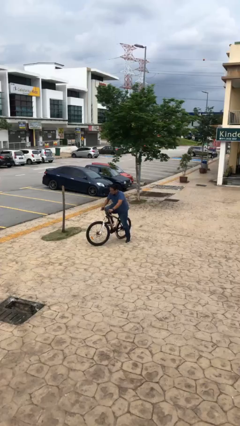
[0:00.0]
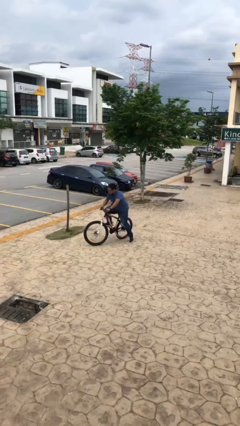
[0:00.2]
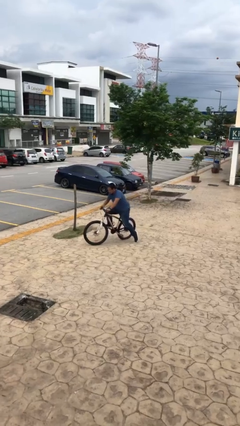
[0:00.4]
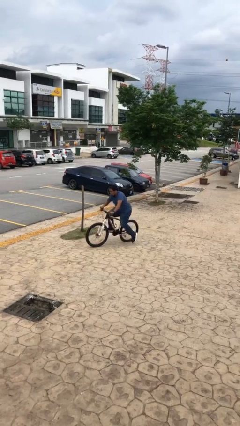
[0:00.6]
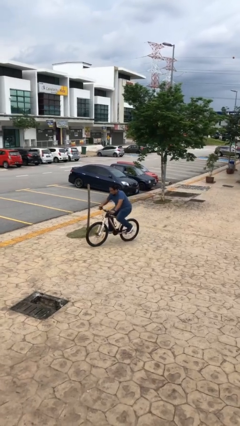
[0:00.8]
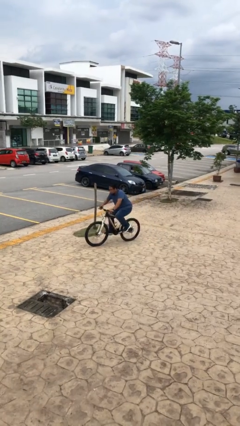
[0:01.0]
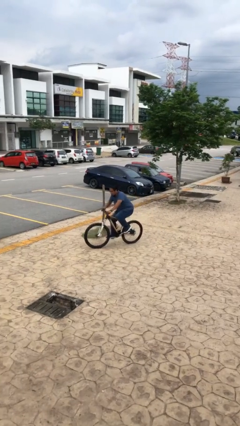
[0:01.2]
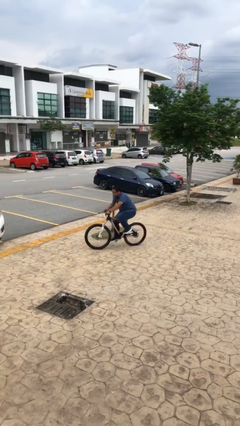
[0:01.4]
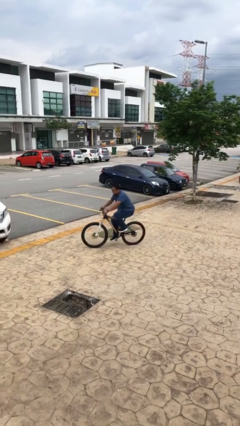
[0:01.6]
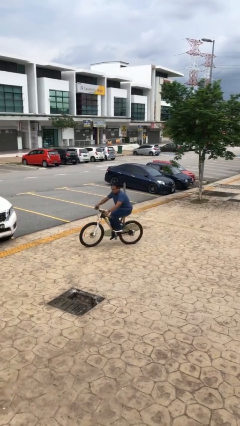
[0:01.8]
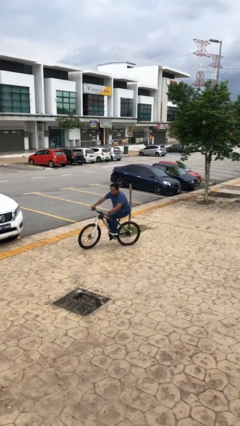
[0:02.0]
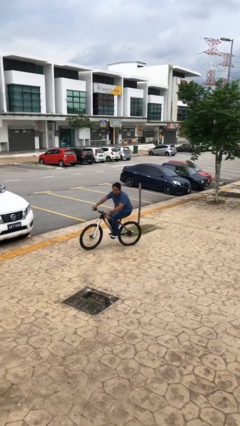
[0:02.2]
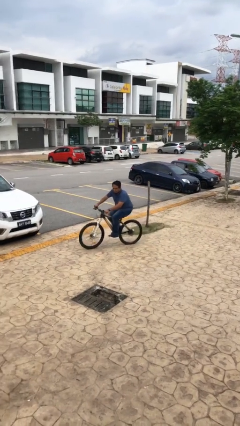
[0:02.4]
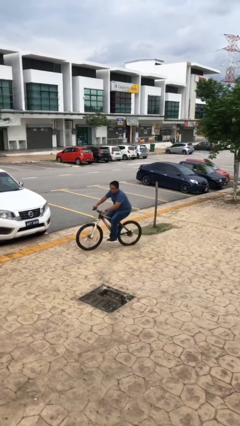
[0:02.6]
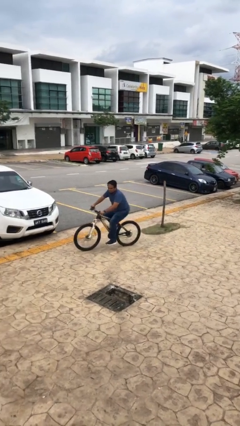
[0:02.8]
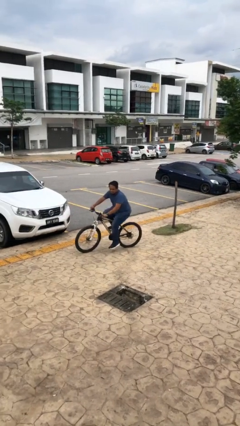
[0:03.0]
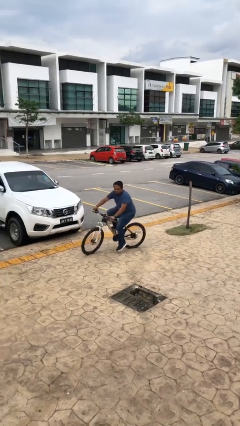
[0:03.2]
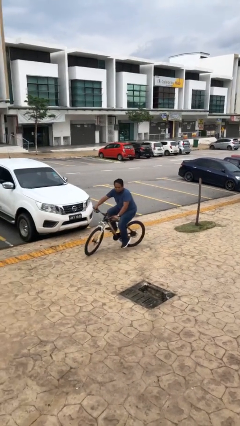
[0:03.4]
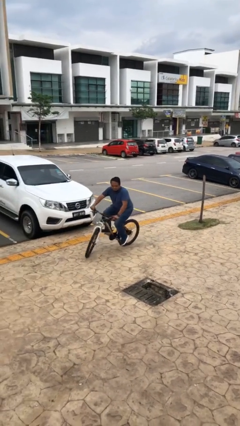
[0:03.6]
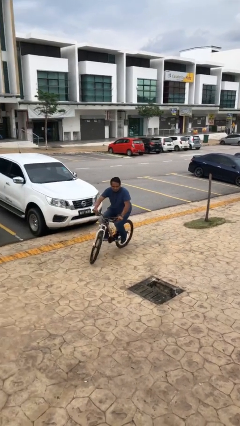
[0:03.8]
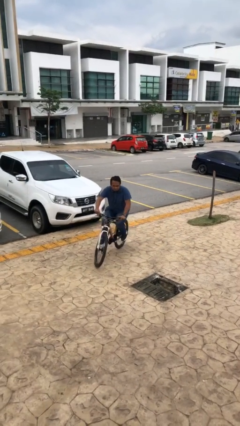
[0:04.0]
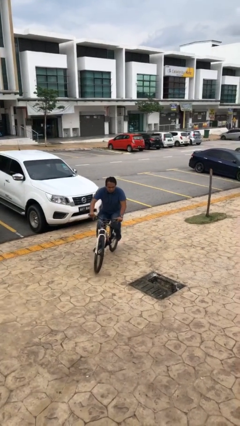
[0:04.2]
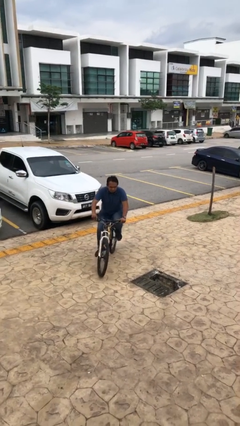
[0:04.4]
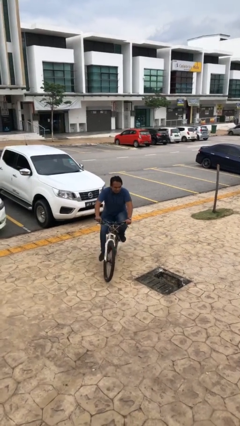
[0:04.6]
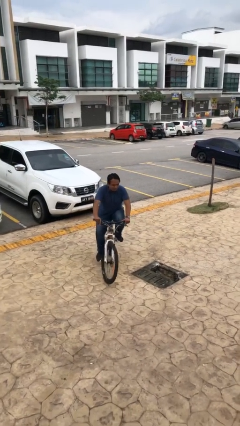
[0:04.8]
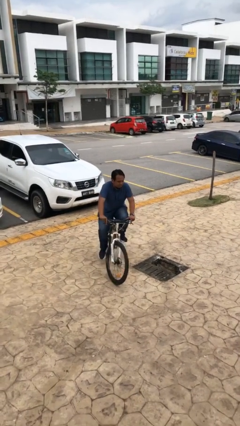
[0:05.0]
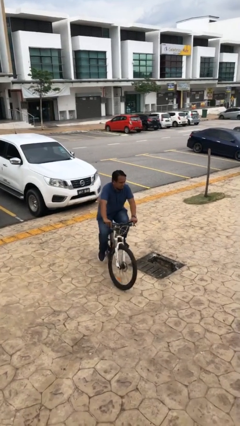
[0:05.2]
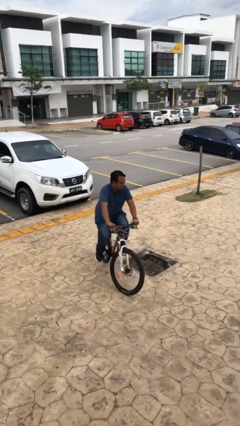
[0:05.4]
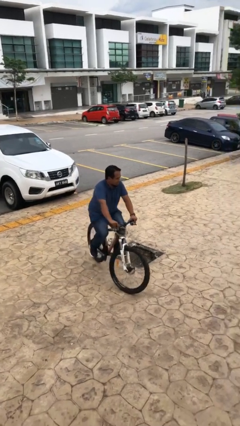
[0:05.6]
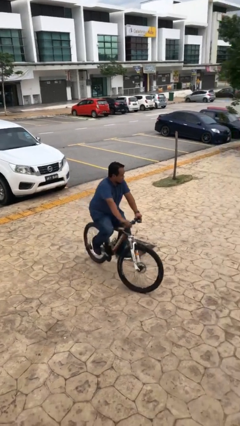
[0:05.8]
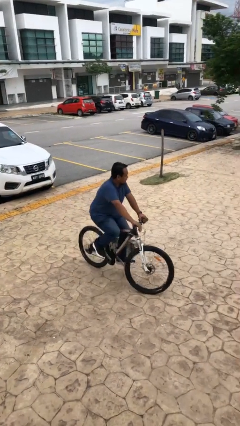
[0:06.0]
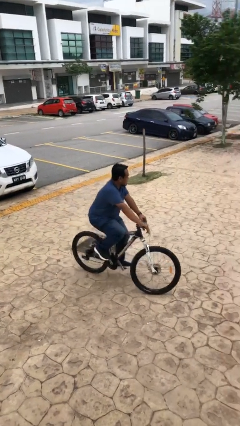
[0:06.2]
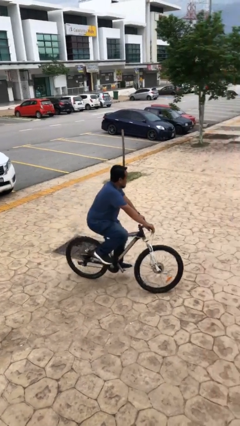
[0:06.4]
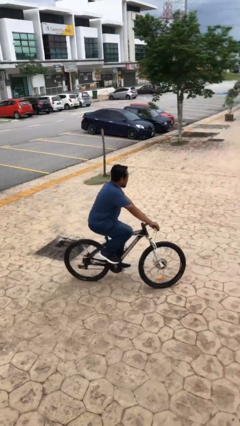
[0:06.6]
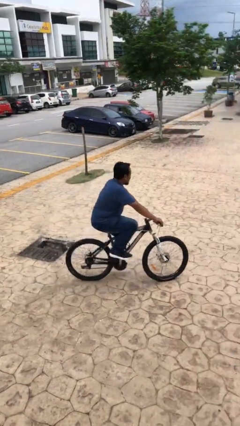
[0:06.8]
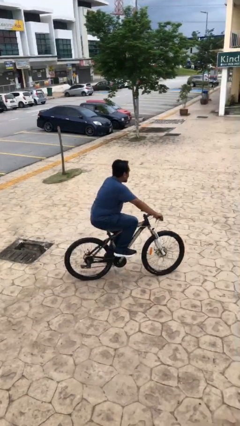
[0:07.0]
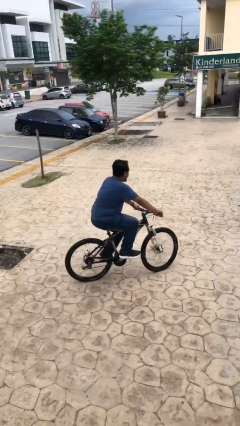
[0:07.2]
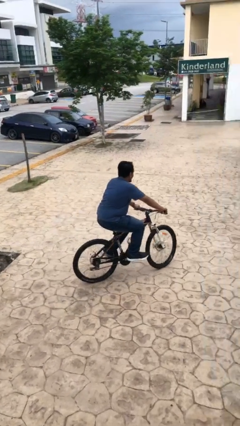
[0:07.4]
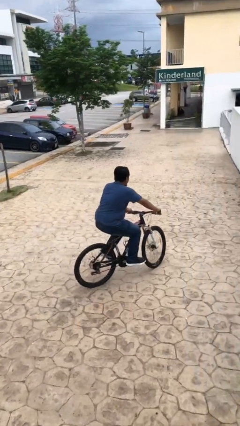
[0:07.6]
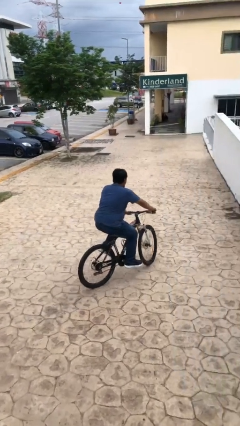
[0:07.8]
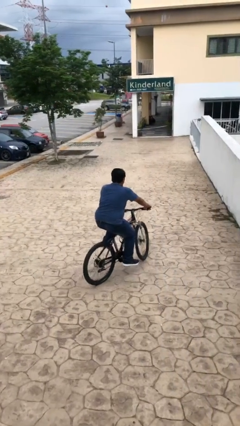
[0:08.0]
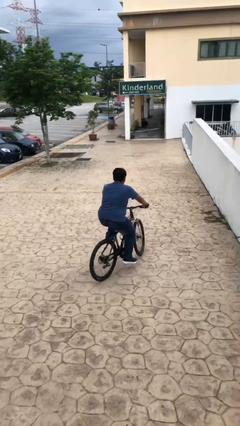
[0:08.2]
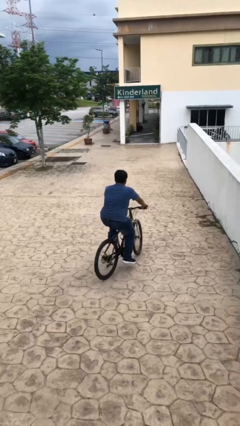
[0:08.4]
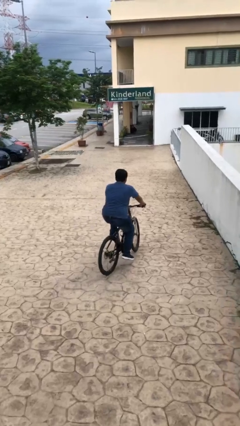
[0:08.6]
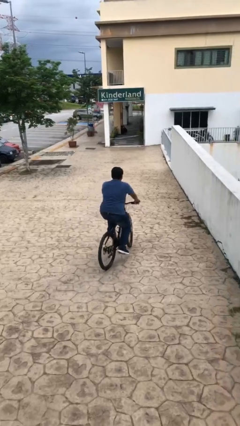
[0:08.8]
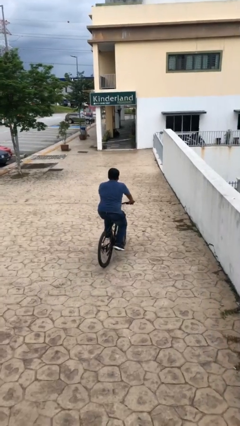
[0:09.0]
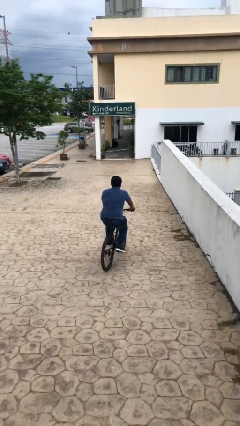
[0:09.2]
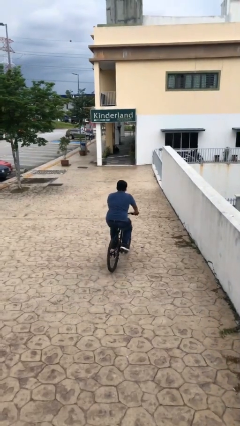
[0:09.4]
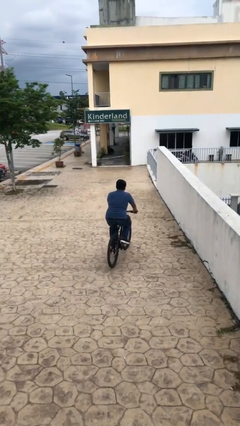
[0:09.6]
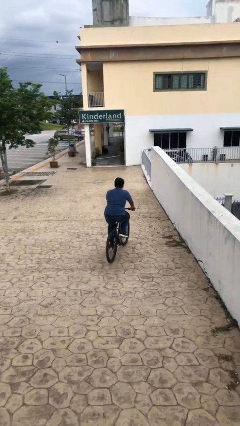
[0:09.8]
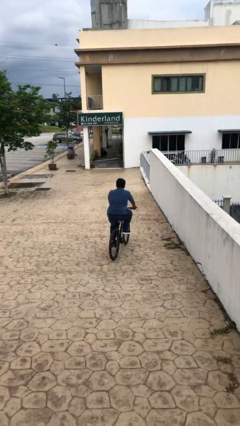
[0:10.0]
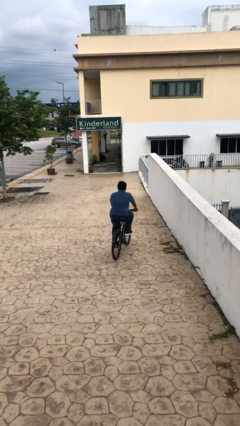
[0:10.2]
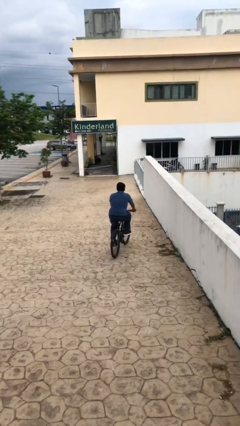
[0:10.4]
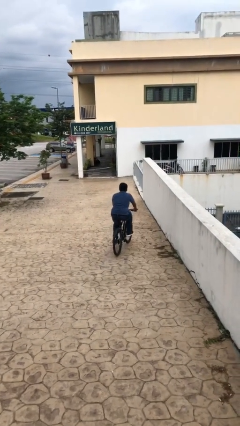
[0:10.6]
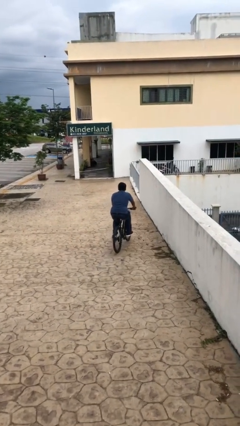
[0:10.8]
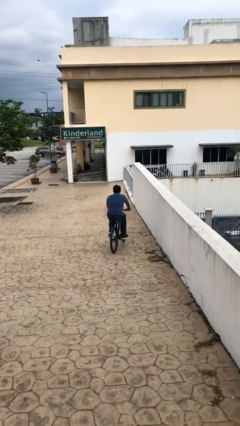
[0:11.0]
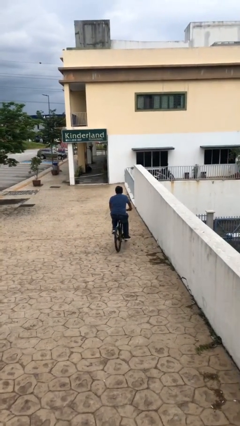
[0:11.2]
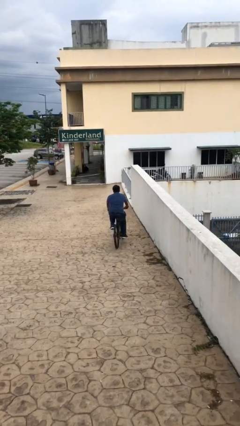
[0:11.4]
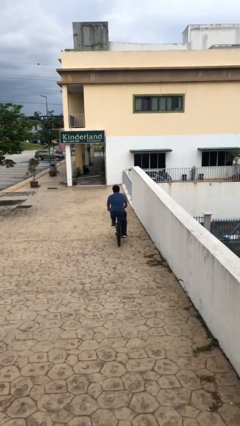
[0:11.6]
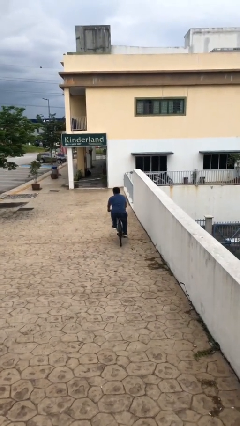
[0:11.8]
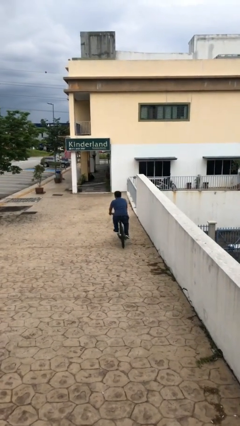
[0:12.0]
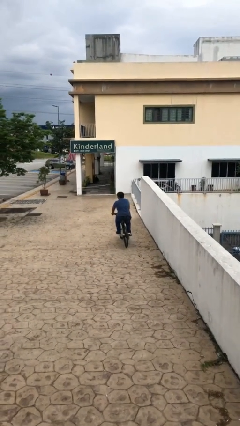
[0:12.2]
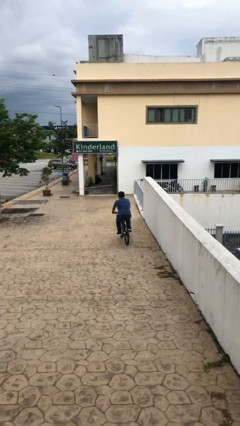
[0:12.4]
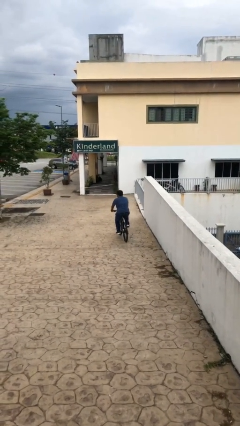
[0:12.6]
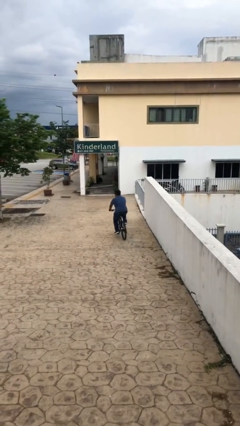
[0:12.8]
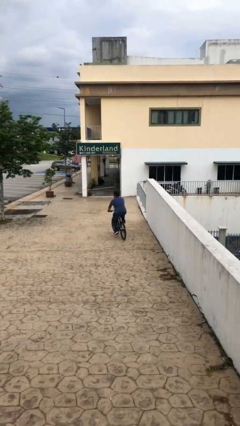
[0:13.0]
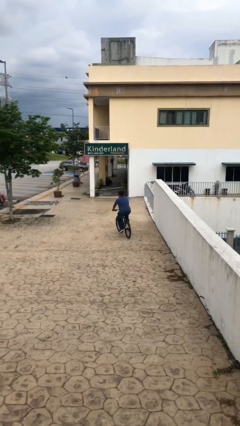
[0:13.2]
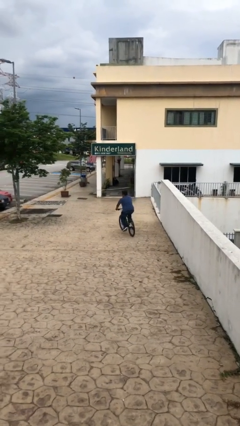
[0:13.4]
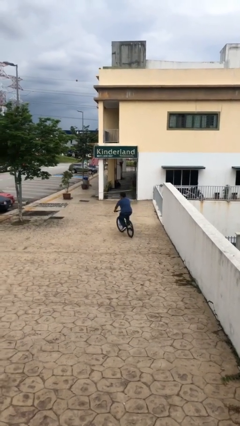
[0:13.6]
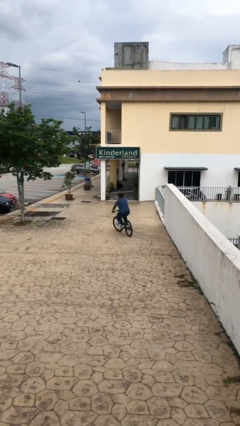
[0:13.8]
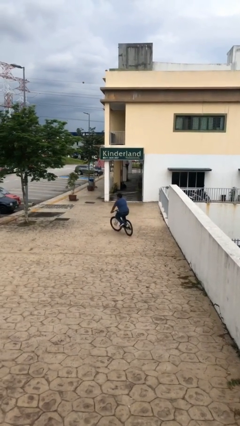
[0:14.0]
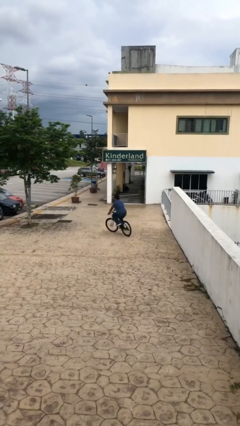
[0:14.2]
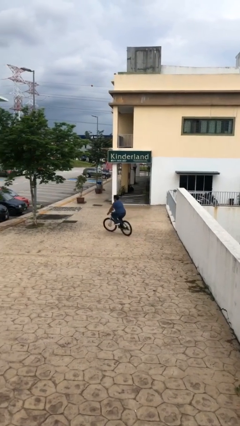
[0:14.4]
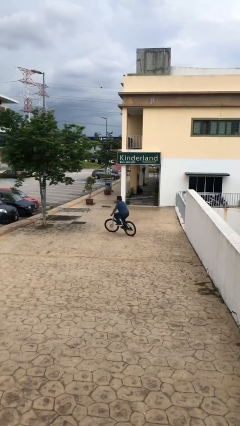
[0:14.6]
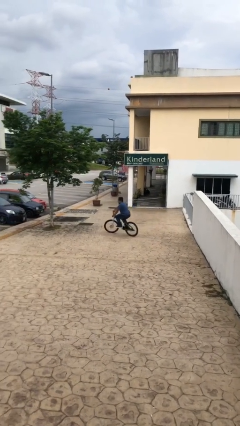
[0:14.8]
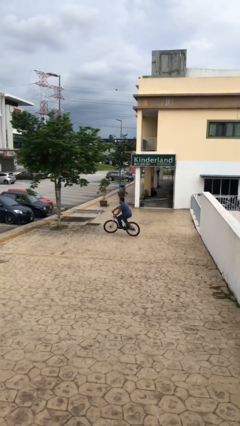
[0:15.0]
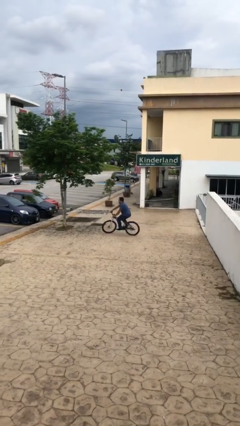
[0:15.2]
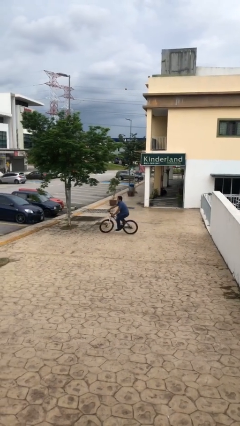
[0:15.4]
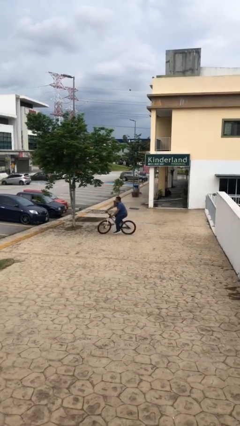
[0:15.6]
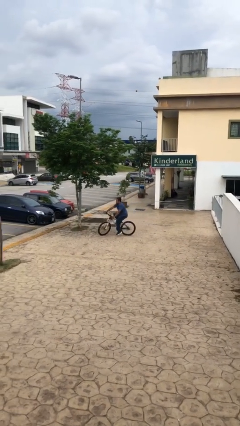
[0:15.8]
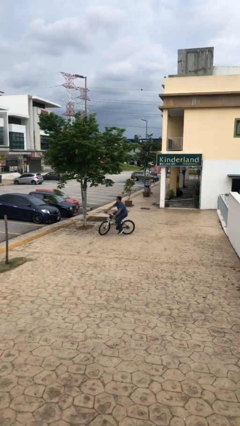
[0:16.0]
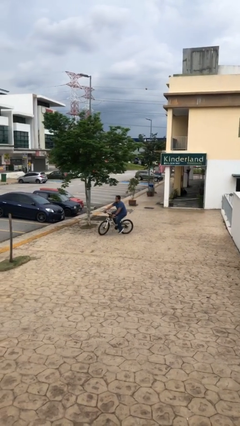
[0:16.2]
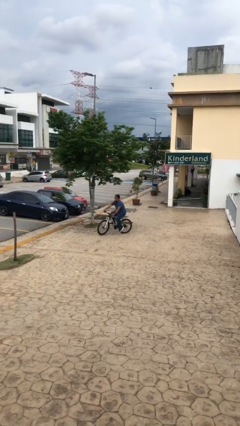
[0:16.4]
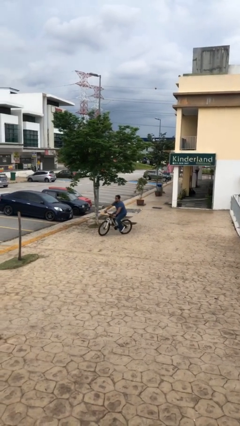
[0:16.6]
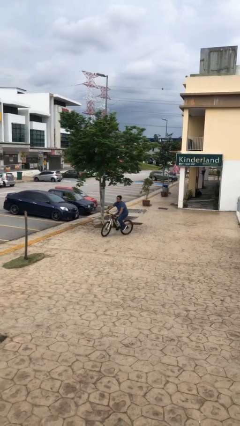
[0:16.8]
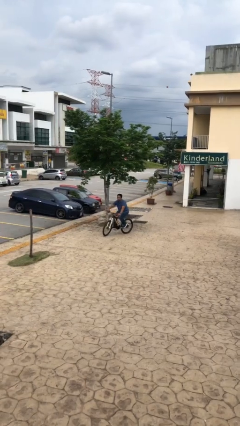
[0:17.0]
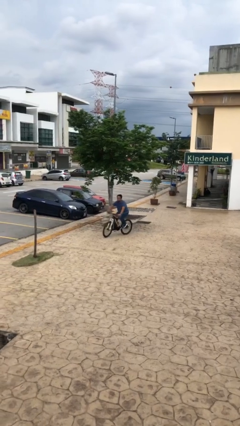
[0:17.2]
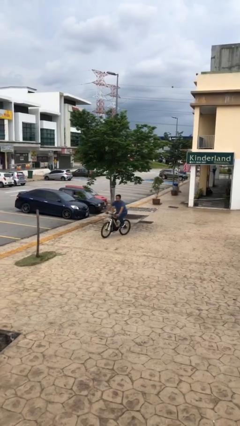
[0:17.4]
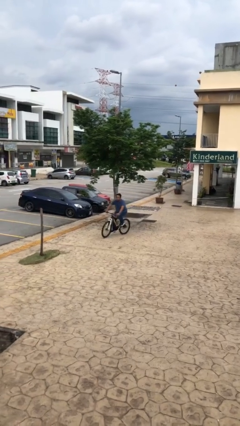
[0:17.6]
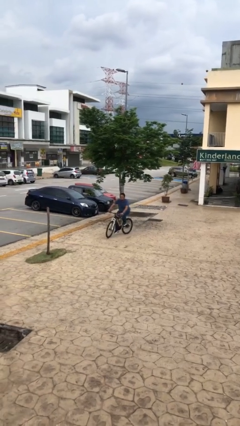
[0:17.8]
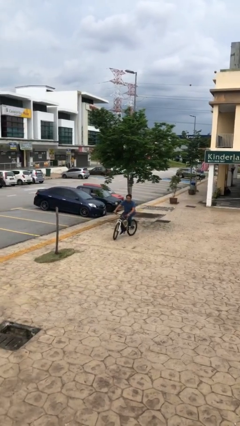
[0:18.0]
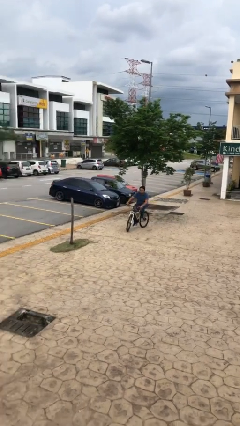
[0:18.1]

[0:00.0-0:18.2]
person rides bicycle

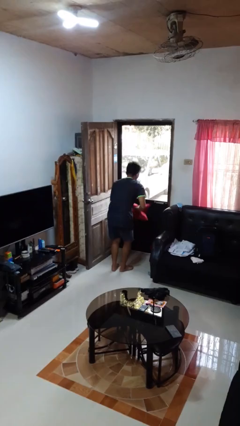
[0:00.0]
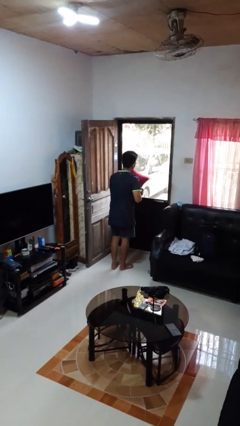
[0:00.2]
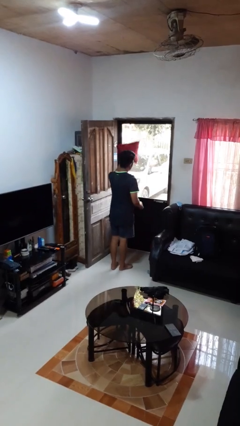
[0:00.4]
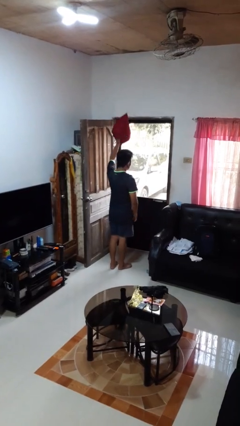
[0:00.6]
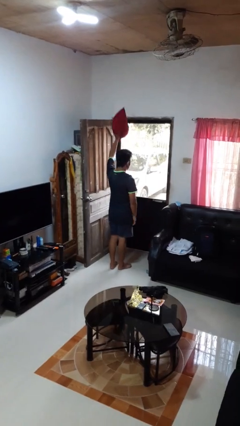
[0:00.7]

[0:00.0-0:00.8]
person picks up object from floor
